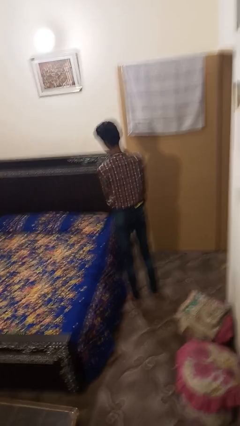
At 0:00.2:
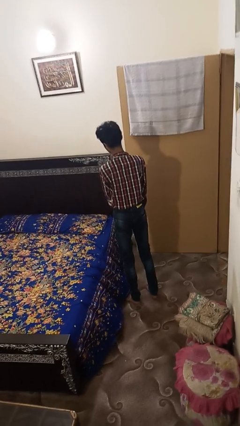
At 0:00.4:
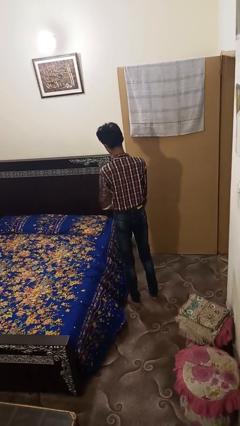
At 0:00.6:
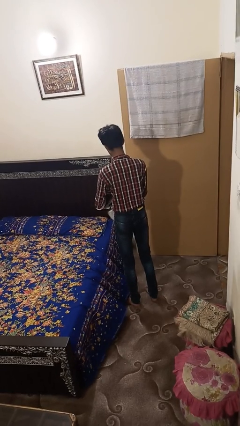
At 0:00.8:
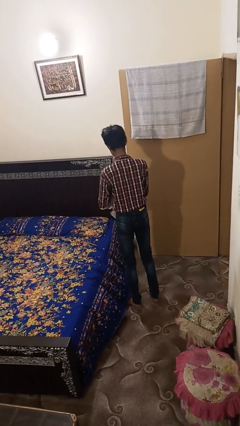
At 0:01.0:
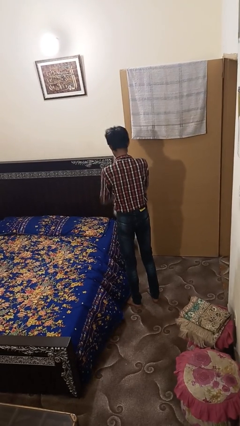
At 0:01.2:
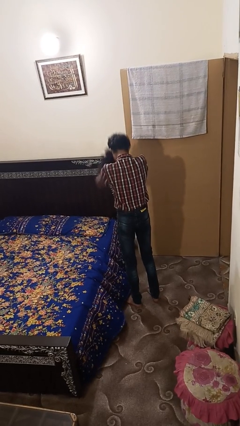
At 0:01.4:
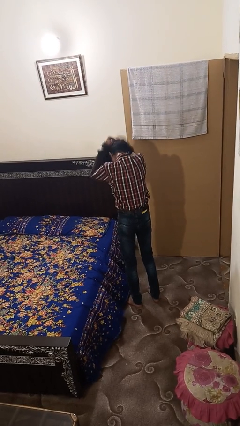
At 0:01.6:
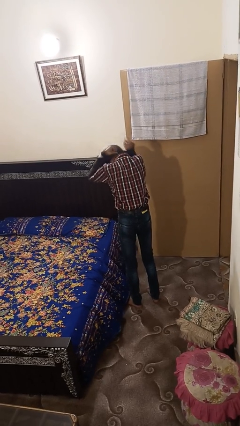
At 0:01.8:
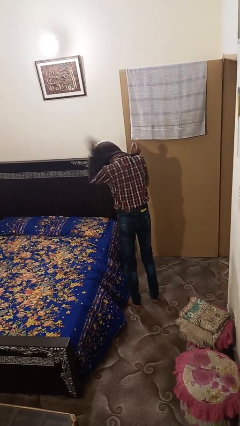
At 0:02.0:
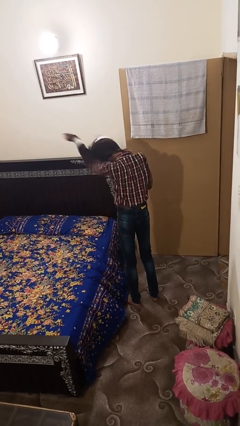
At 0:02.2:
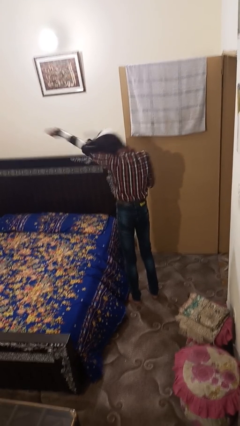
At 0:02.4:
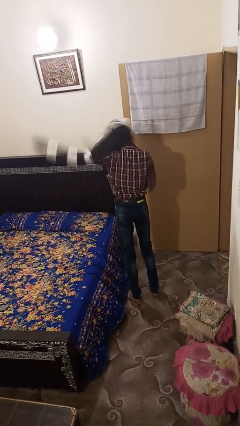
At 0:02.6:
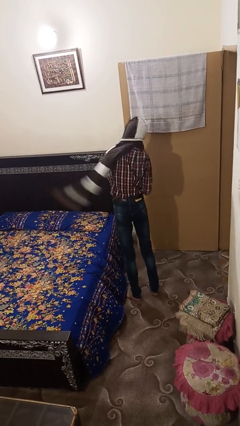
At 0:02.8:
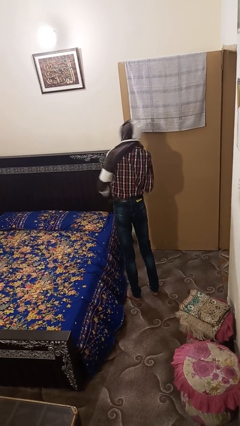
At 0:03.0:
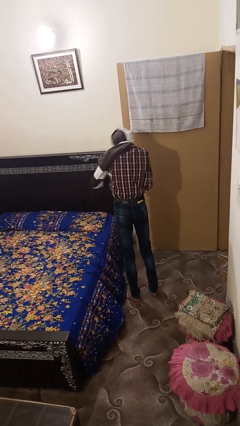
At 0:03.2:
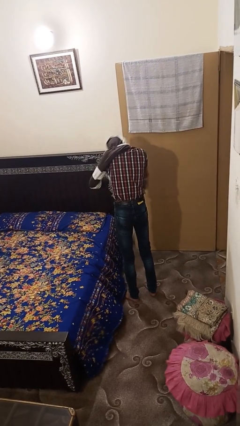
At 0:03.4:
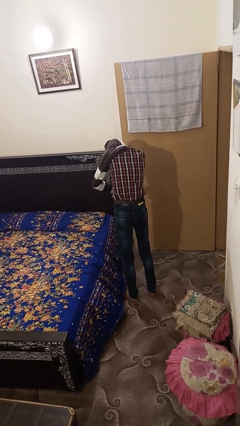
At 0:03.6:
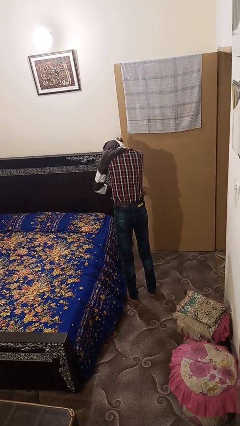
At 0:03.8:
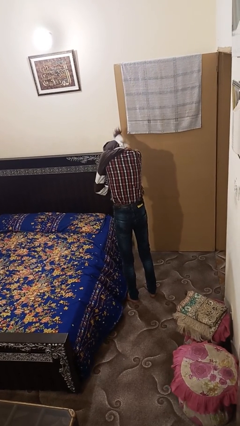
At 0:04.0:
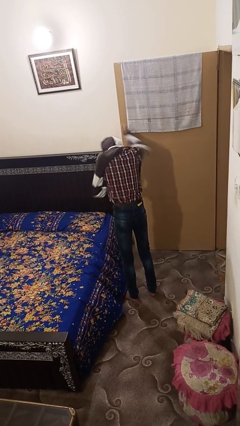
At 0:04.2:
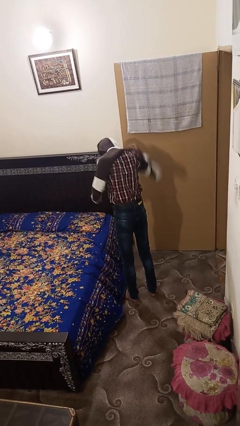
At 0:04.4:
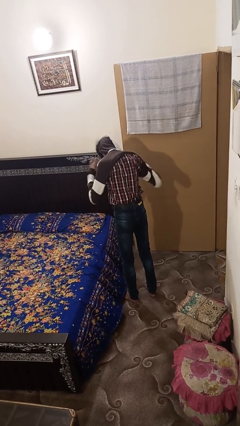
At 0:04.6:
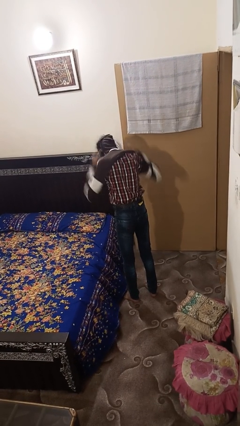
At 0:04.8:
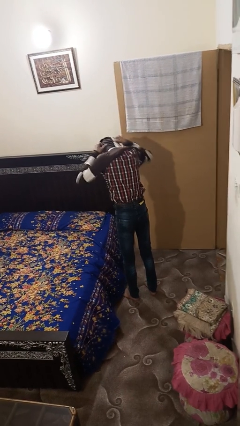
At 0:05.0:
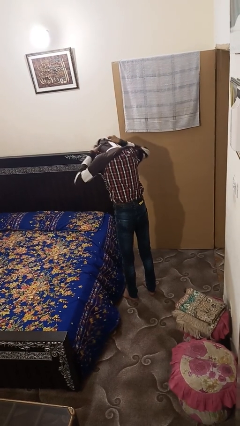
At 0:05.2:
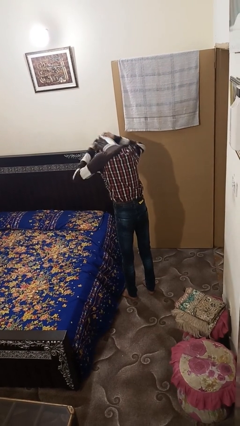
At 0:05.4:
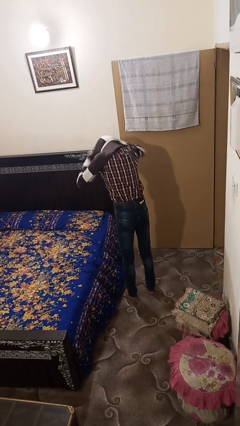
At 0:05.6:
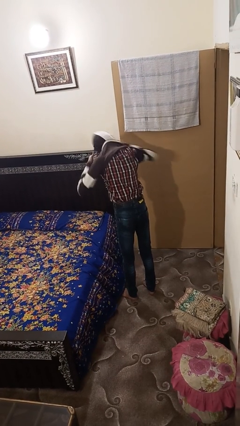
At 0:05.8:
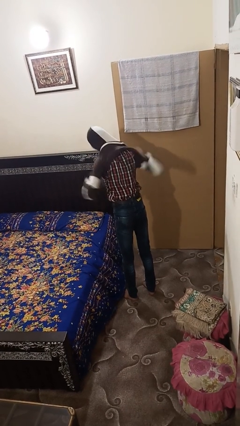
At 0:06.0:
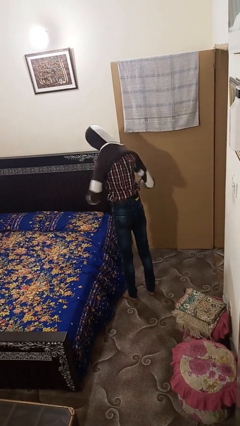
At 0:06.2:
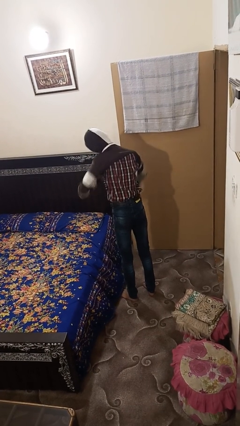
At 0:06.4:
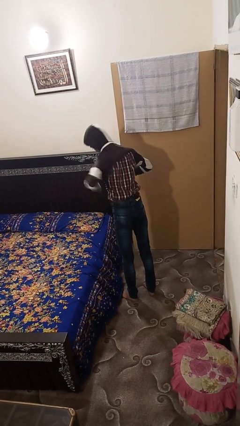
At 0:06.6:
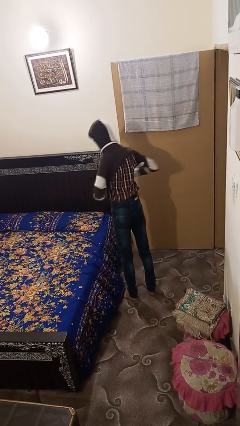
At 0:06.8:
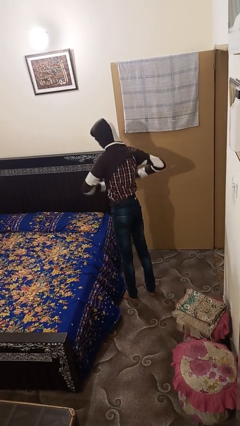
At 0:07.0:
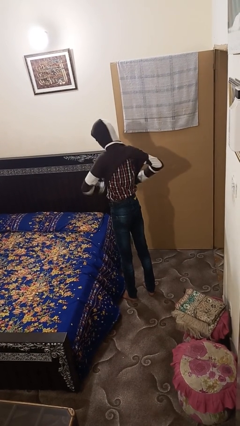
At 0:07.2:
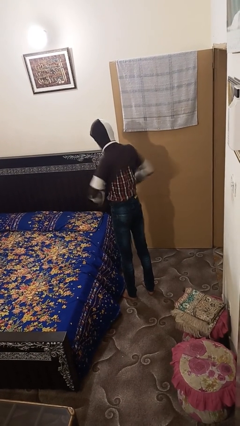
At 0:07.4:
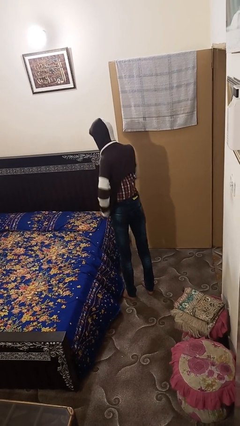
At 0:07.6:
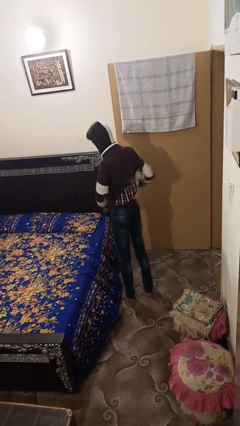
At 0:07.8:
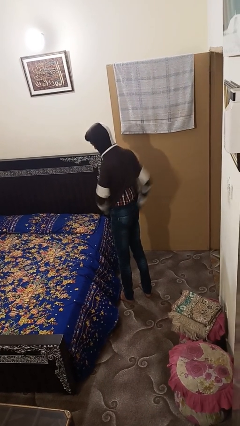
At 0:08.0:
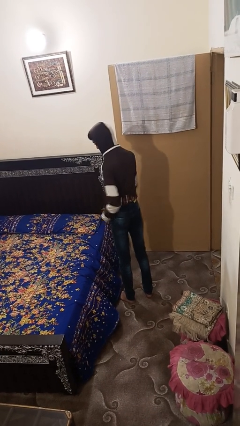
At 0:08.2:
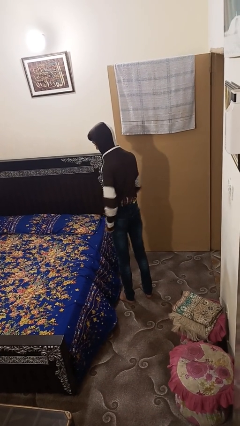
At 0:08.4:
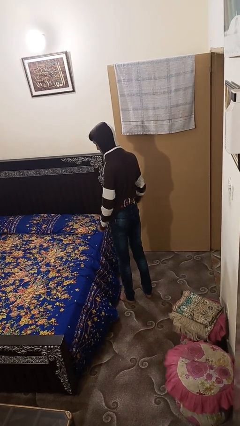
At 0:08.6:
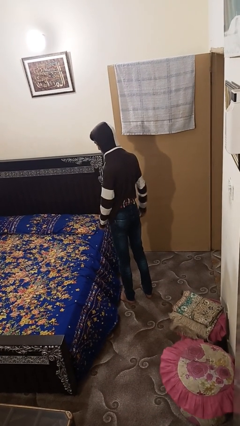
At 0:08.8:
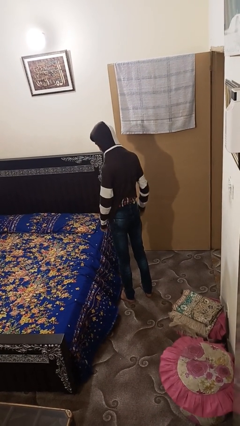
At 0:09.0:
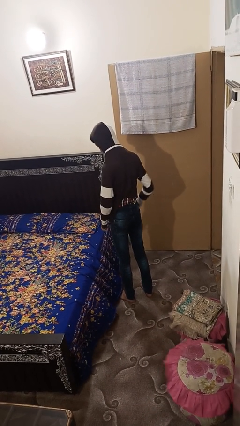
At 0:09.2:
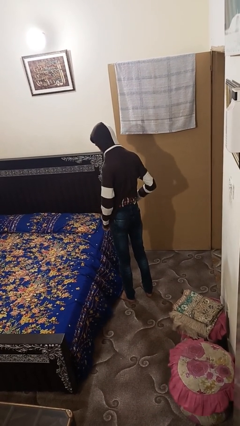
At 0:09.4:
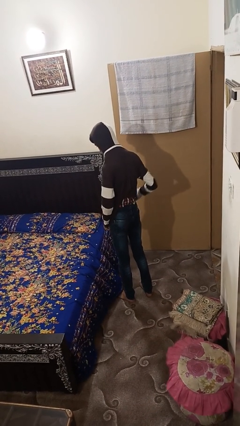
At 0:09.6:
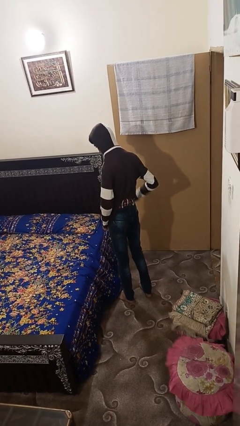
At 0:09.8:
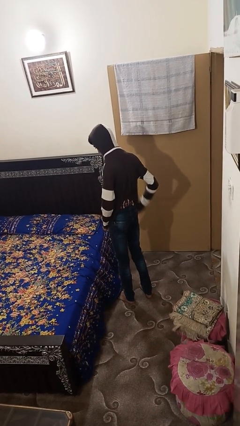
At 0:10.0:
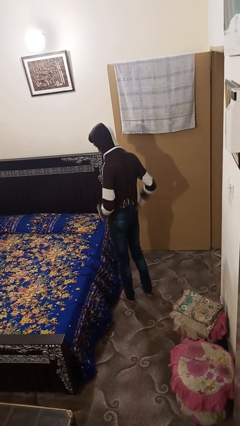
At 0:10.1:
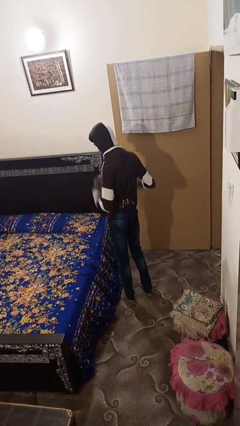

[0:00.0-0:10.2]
person puts on hoodie

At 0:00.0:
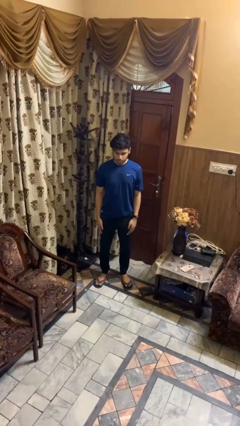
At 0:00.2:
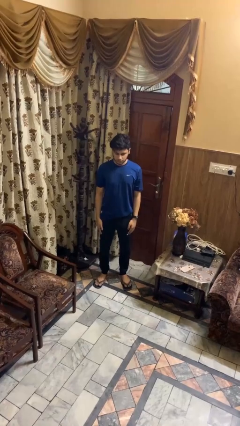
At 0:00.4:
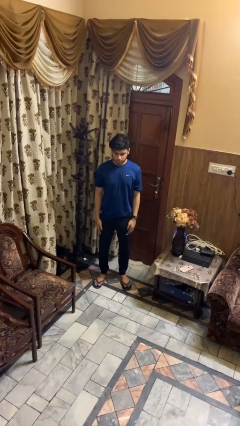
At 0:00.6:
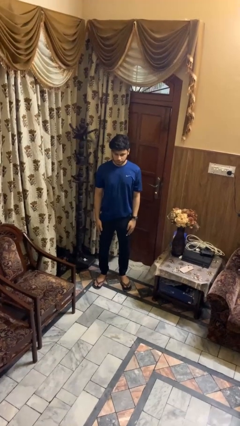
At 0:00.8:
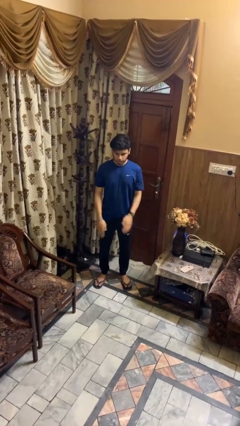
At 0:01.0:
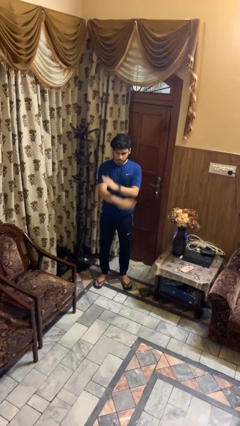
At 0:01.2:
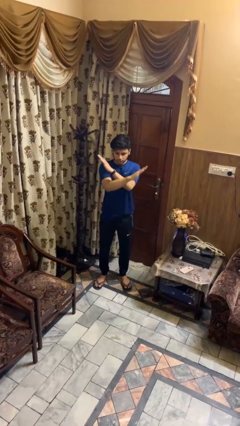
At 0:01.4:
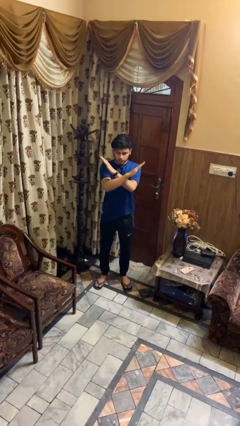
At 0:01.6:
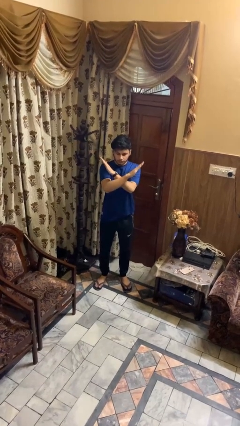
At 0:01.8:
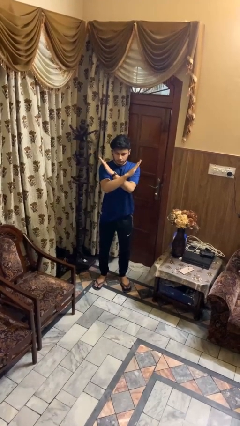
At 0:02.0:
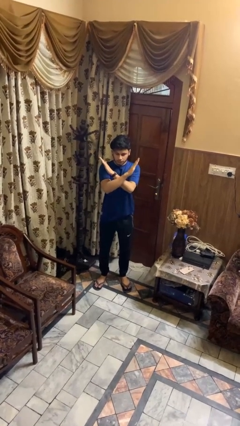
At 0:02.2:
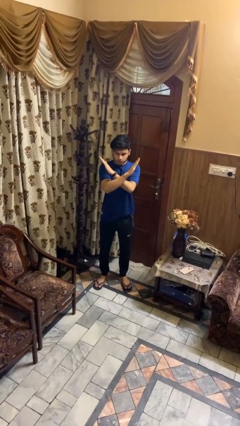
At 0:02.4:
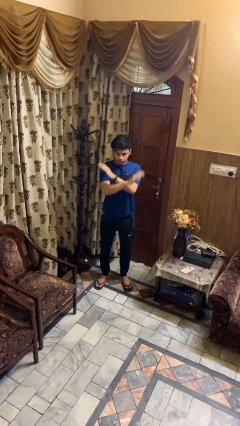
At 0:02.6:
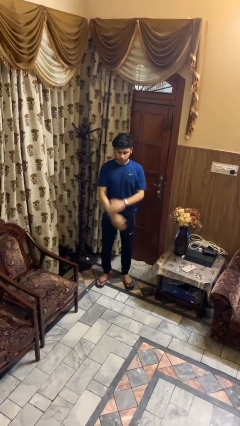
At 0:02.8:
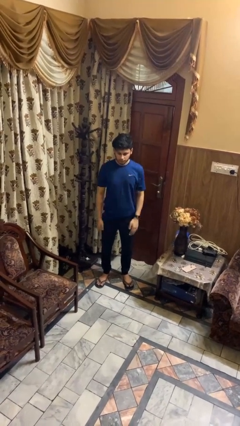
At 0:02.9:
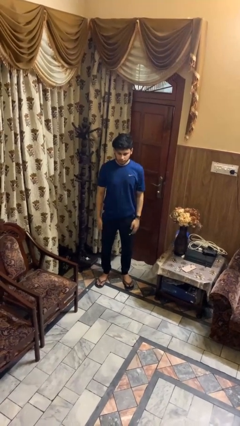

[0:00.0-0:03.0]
person gestures arms x

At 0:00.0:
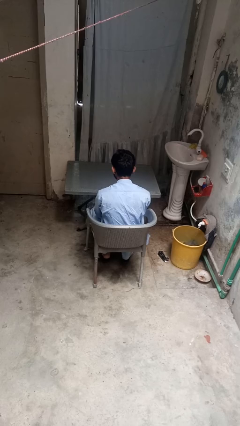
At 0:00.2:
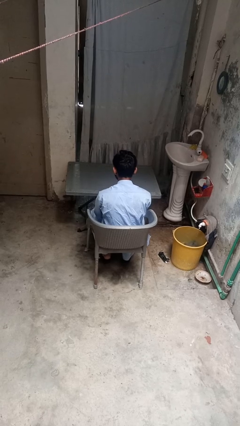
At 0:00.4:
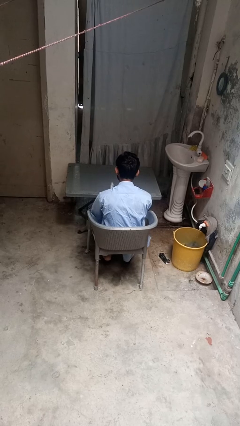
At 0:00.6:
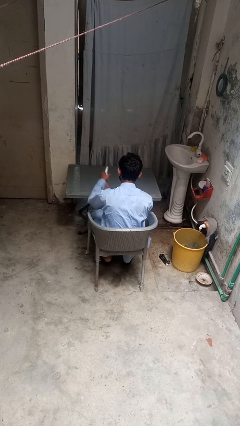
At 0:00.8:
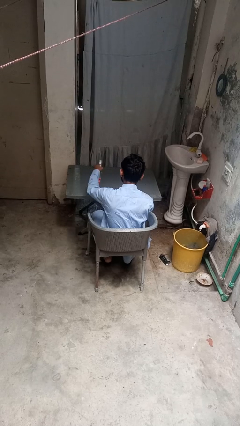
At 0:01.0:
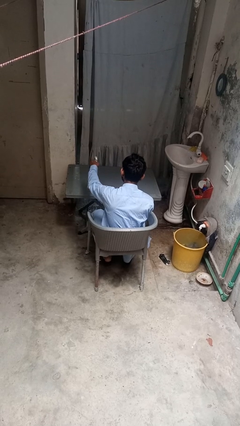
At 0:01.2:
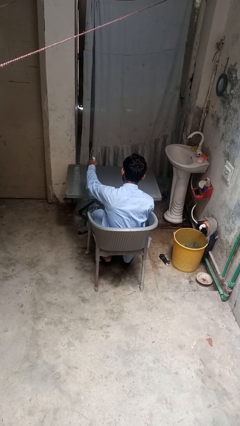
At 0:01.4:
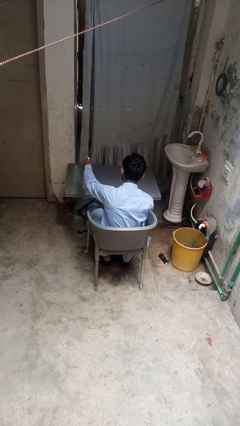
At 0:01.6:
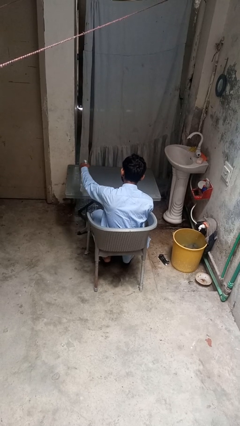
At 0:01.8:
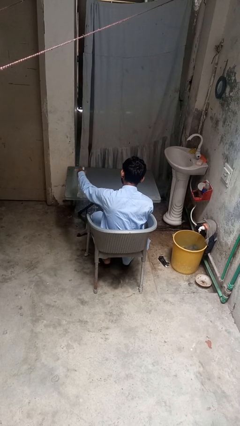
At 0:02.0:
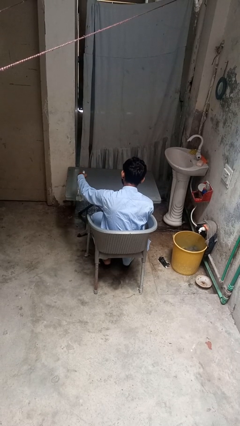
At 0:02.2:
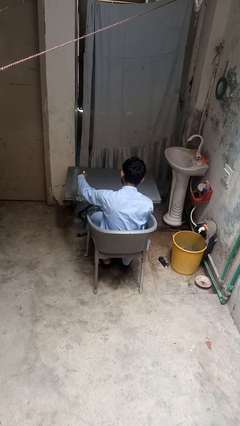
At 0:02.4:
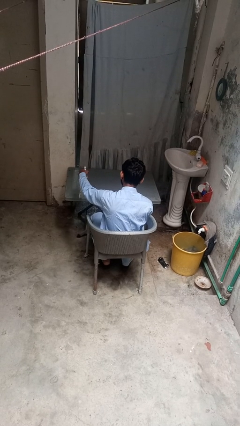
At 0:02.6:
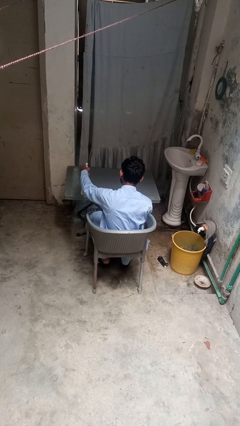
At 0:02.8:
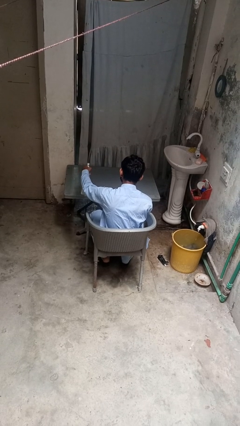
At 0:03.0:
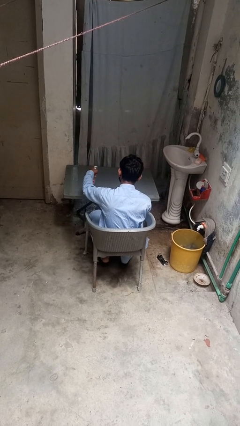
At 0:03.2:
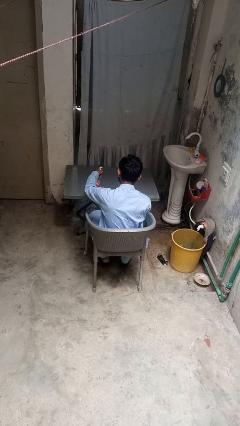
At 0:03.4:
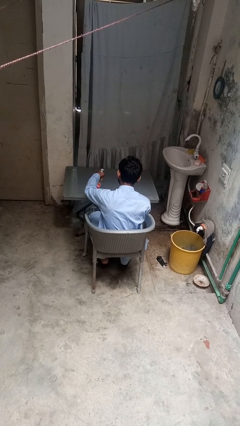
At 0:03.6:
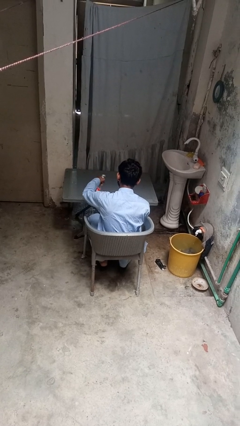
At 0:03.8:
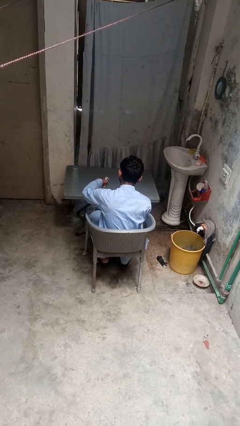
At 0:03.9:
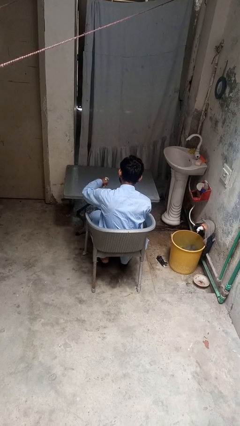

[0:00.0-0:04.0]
person sprays from bottle

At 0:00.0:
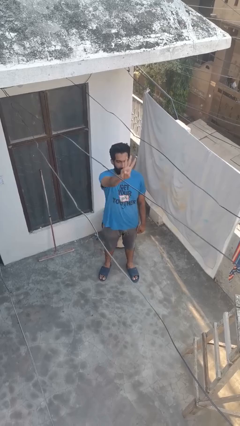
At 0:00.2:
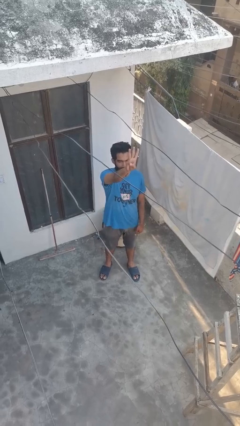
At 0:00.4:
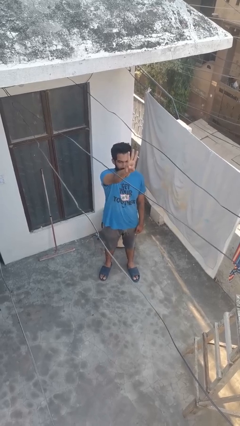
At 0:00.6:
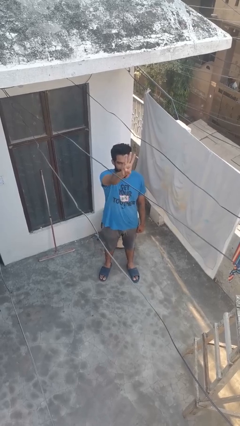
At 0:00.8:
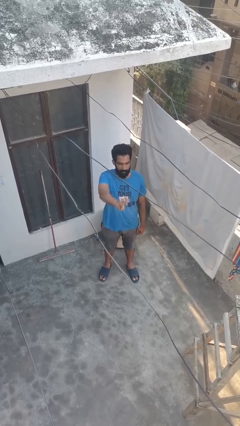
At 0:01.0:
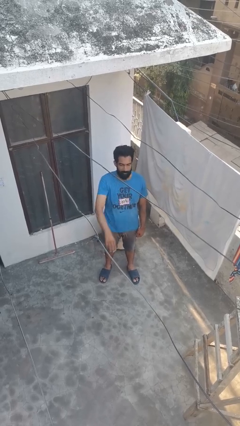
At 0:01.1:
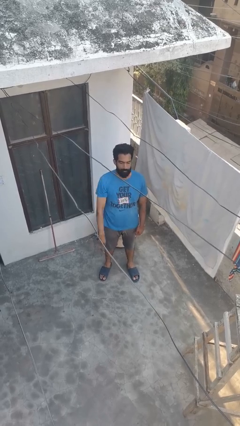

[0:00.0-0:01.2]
person gestures number three
